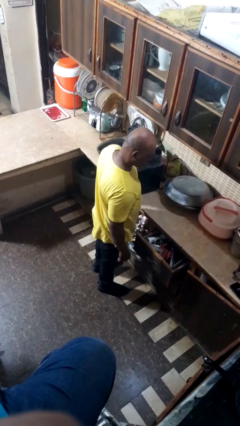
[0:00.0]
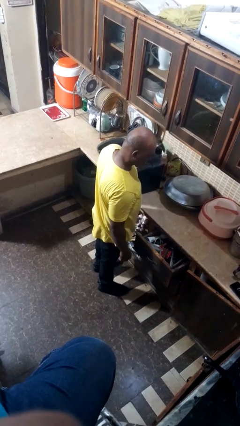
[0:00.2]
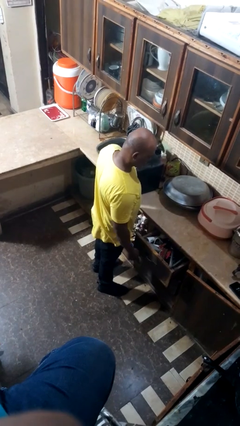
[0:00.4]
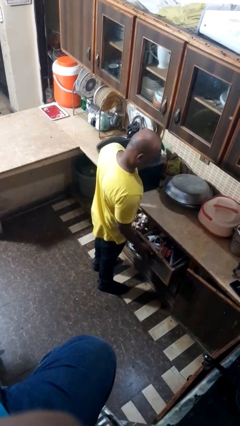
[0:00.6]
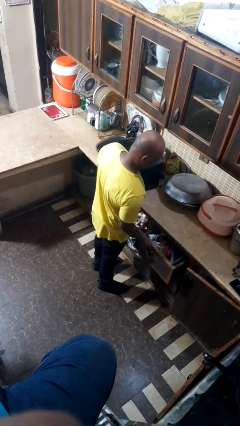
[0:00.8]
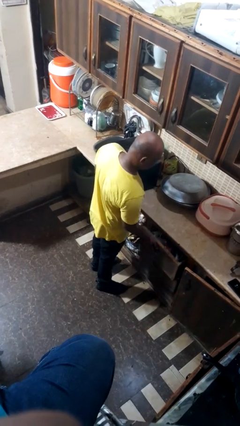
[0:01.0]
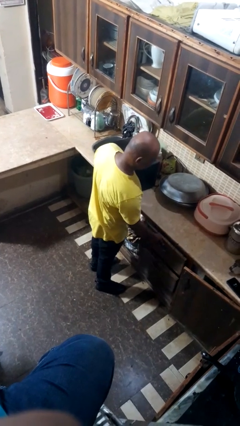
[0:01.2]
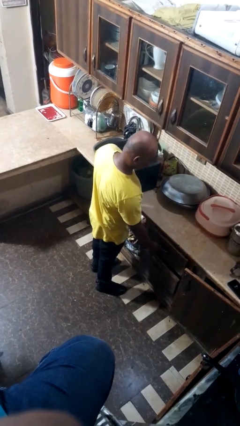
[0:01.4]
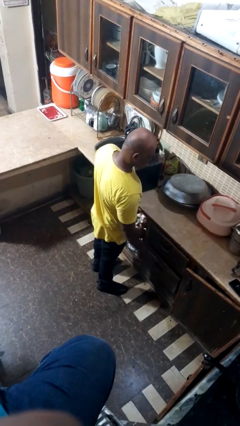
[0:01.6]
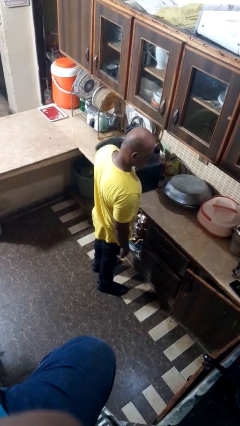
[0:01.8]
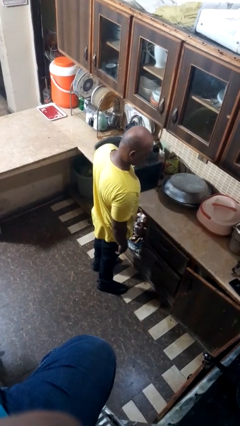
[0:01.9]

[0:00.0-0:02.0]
person closes dresser drawer

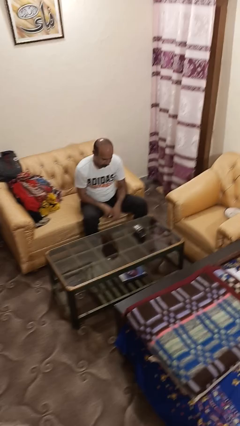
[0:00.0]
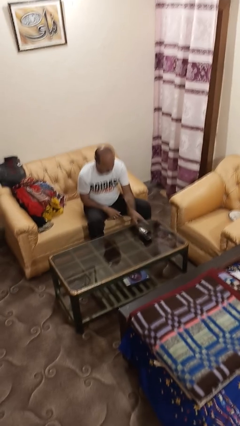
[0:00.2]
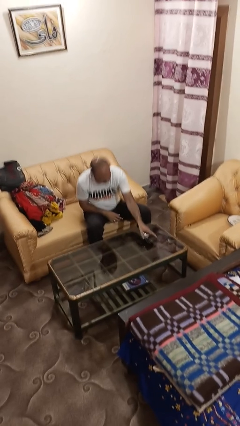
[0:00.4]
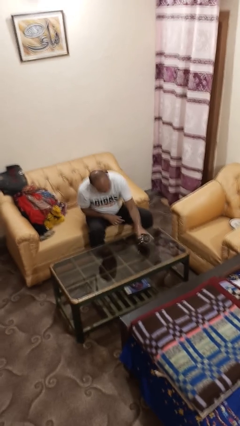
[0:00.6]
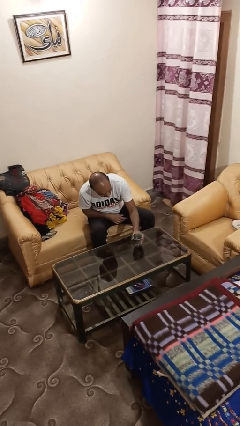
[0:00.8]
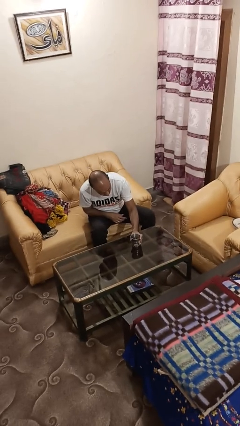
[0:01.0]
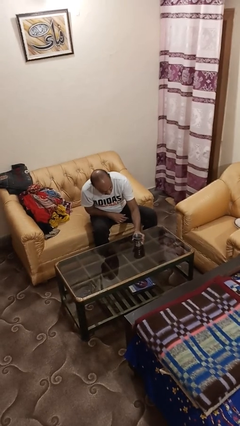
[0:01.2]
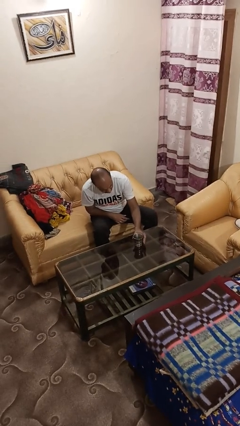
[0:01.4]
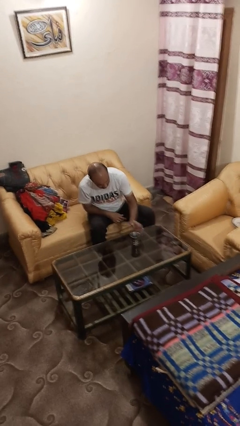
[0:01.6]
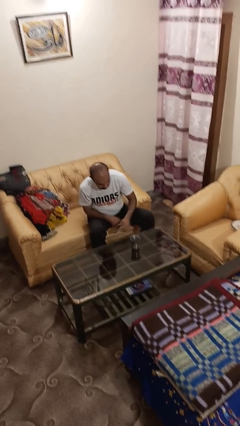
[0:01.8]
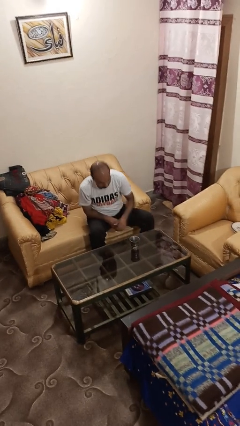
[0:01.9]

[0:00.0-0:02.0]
person sets upright glass

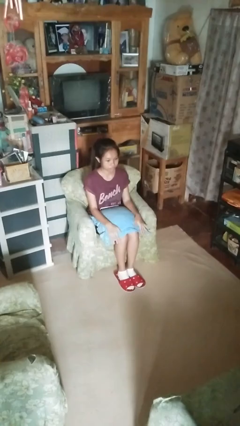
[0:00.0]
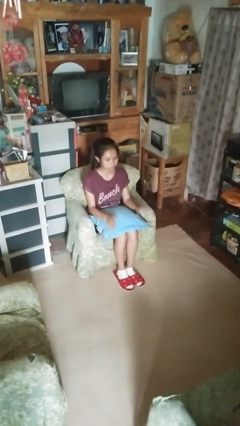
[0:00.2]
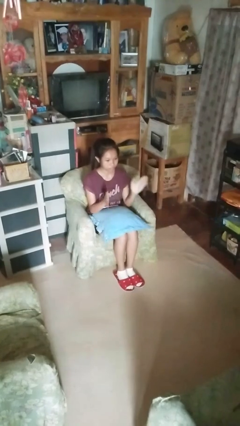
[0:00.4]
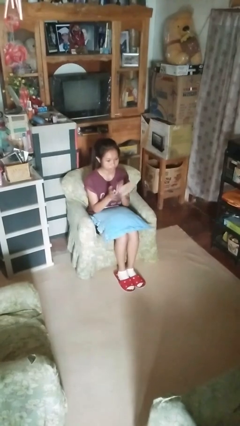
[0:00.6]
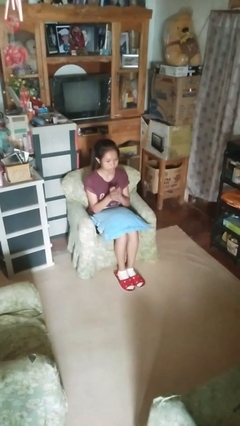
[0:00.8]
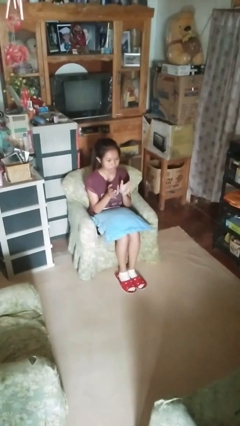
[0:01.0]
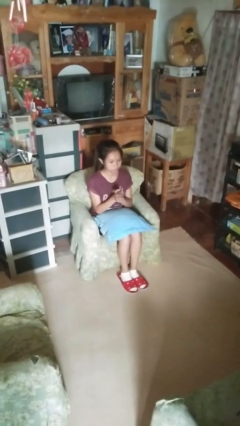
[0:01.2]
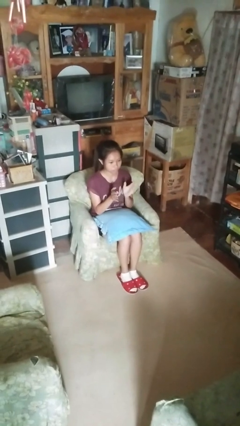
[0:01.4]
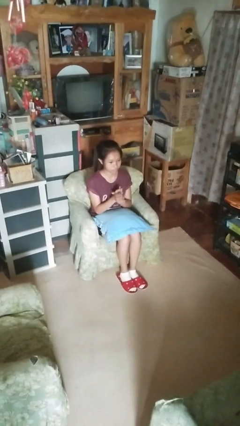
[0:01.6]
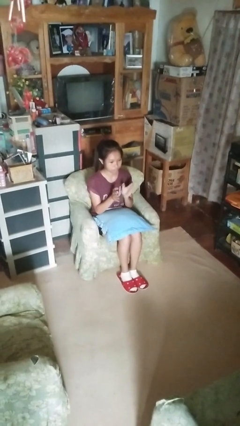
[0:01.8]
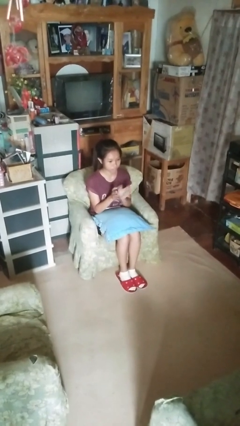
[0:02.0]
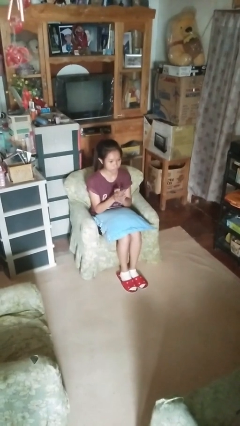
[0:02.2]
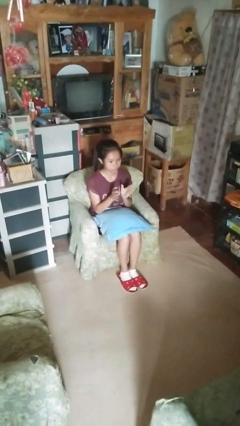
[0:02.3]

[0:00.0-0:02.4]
person claps hands

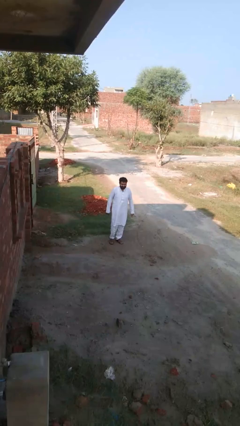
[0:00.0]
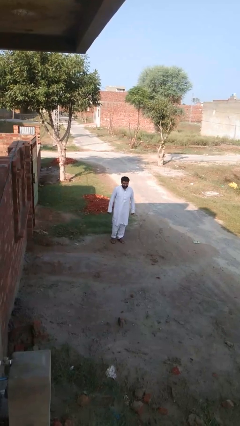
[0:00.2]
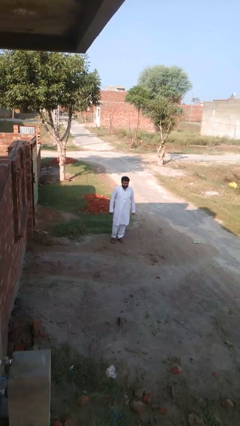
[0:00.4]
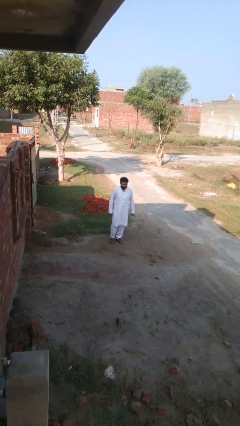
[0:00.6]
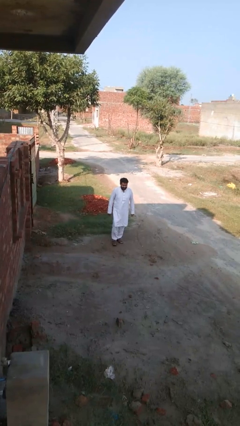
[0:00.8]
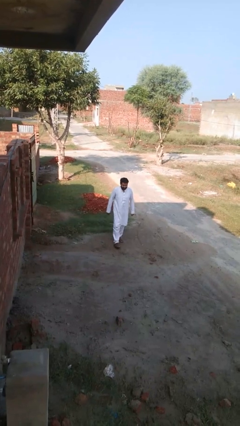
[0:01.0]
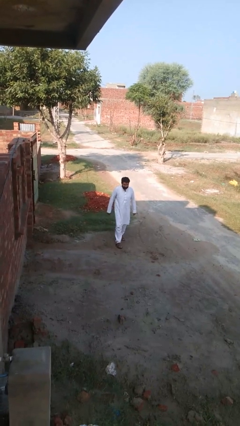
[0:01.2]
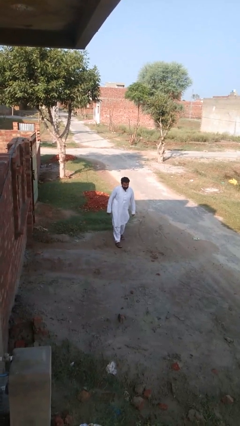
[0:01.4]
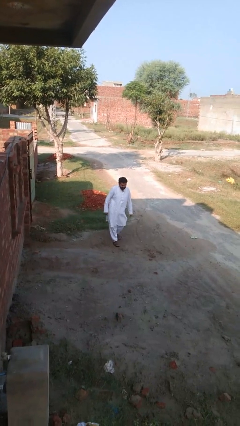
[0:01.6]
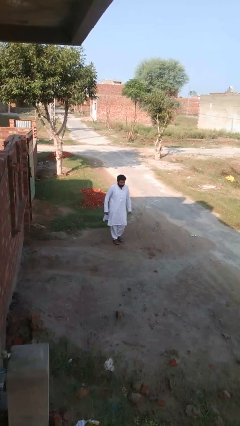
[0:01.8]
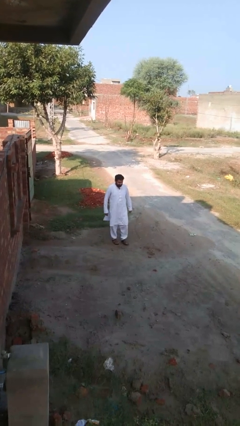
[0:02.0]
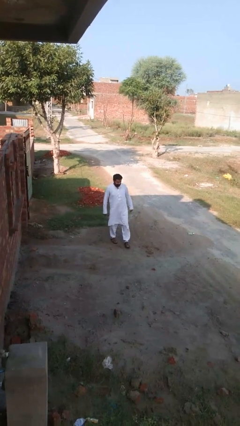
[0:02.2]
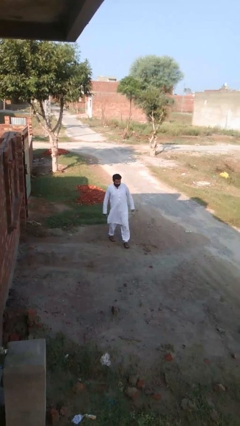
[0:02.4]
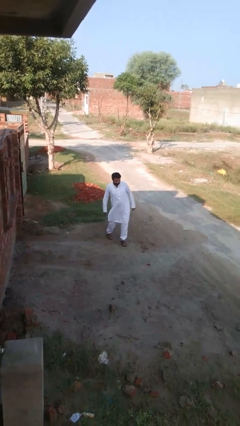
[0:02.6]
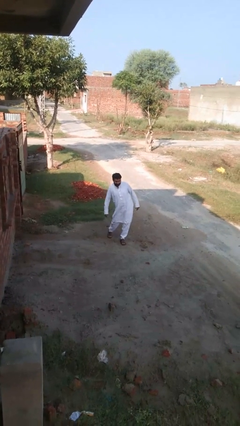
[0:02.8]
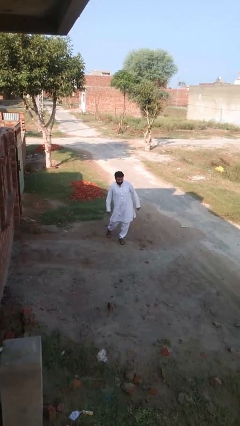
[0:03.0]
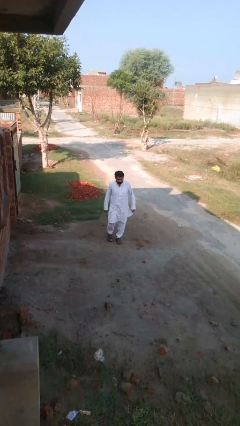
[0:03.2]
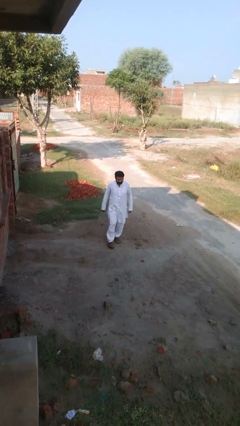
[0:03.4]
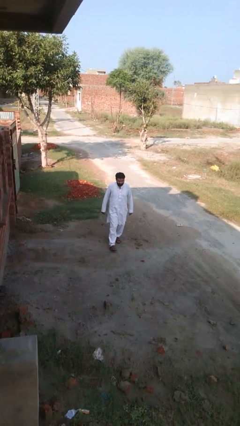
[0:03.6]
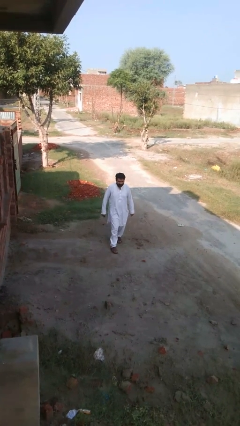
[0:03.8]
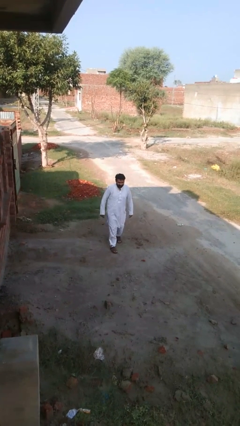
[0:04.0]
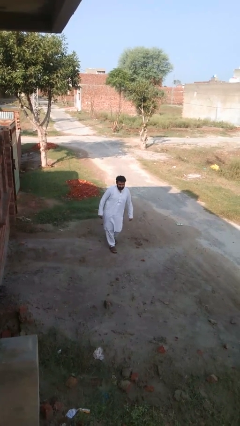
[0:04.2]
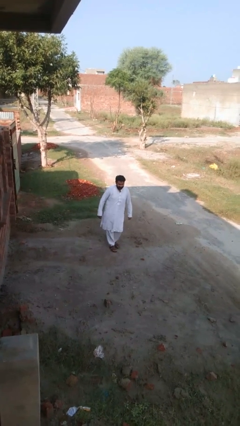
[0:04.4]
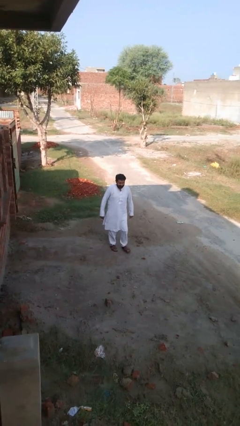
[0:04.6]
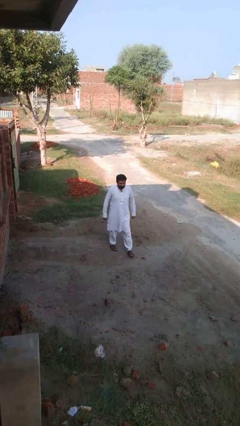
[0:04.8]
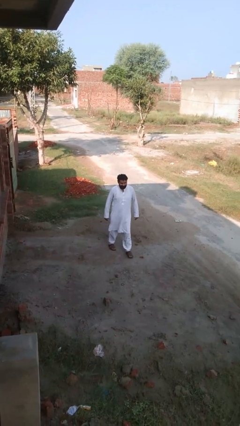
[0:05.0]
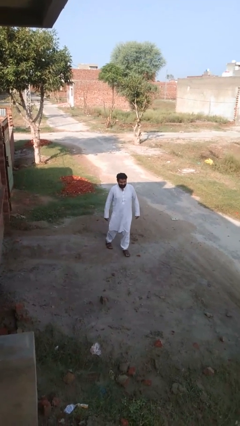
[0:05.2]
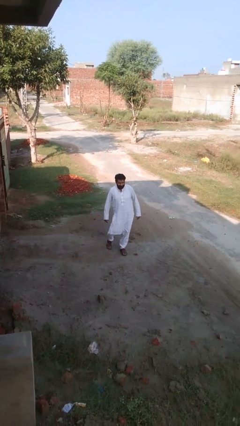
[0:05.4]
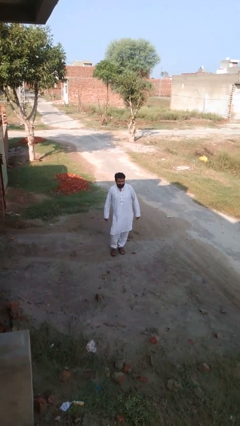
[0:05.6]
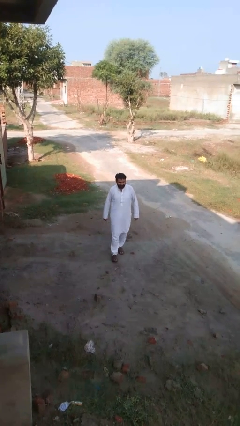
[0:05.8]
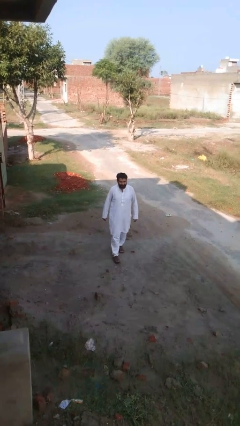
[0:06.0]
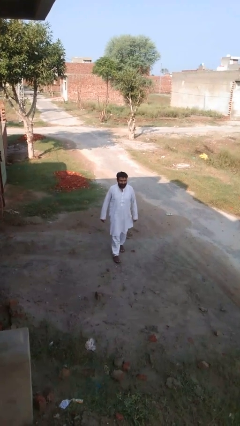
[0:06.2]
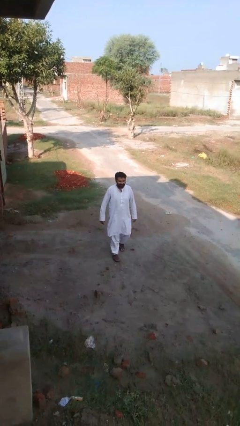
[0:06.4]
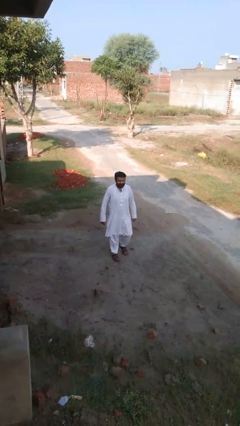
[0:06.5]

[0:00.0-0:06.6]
person walks tiptoe

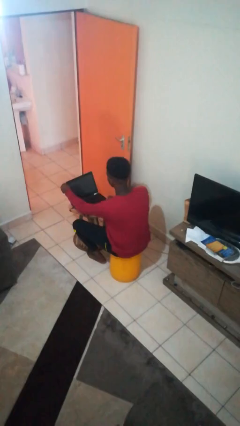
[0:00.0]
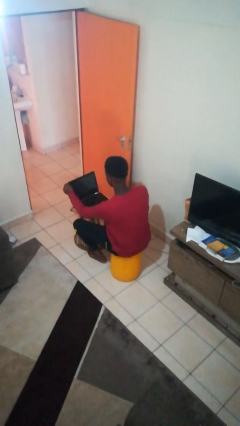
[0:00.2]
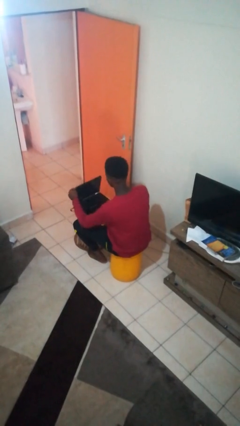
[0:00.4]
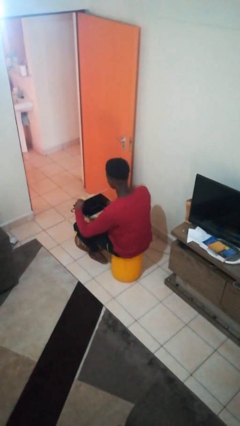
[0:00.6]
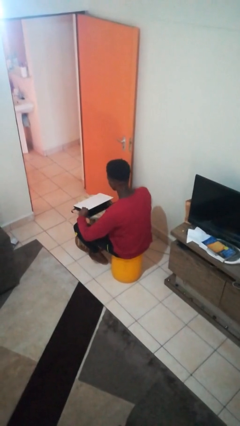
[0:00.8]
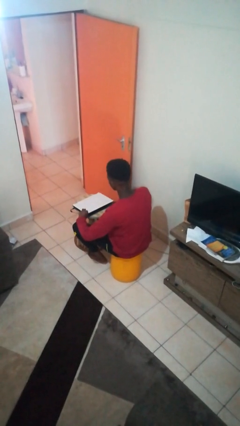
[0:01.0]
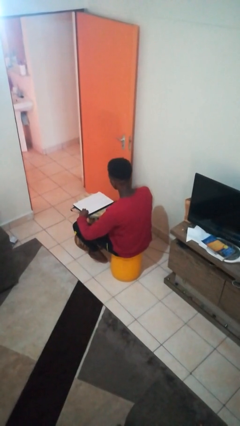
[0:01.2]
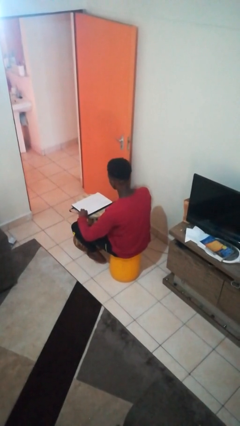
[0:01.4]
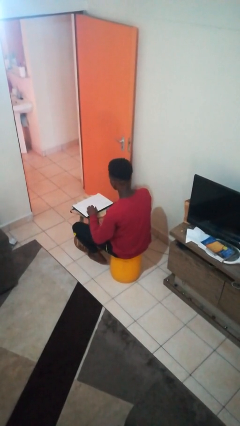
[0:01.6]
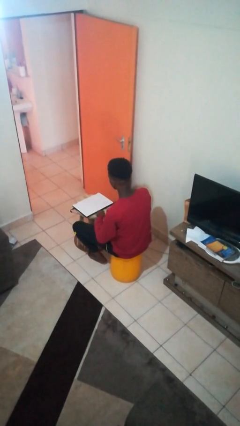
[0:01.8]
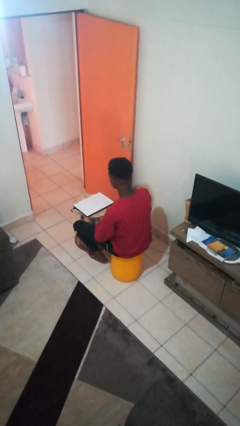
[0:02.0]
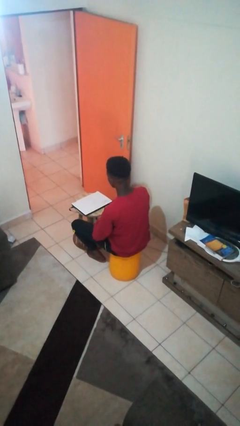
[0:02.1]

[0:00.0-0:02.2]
person closes laptop

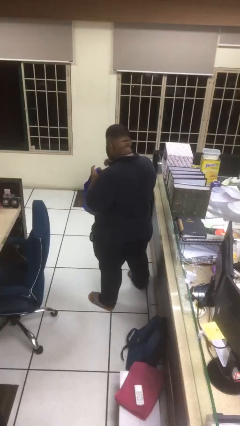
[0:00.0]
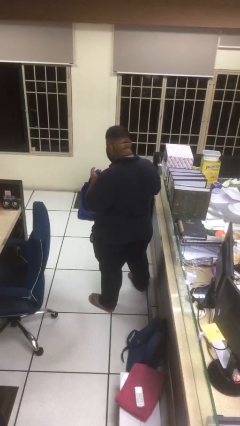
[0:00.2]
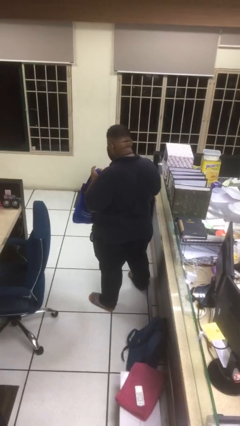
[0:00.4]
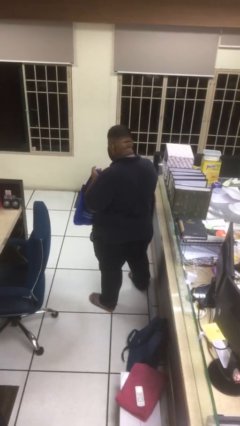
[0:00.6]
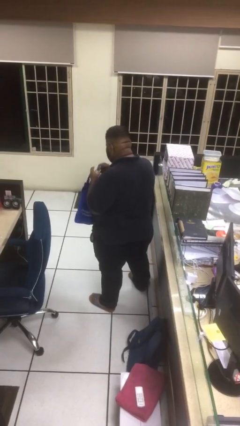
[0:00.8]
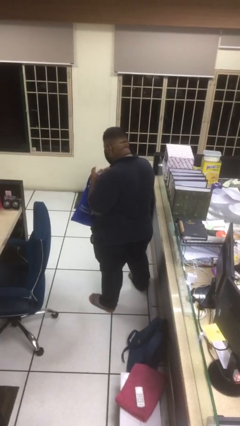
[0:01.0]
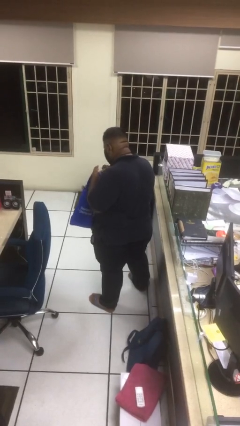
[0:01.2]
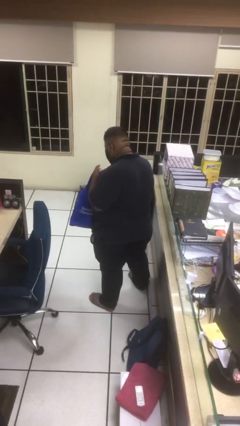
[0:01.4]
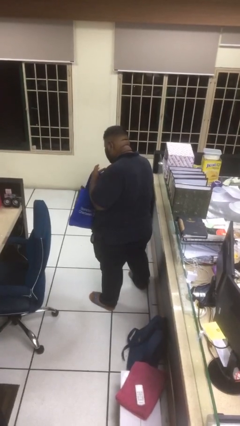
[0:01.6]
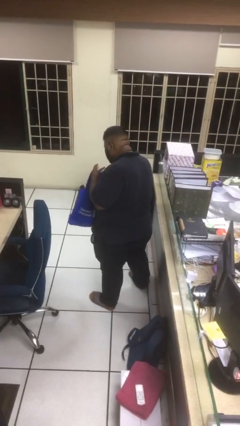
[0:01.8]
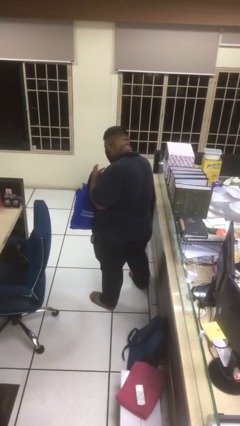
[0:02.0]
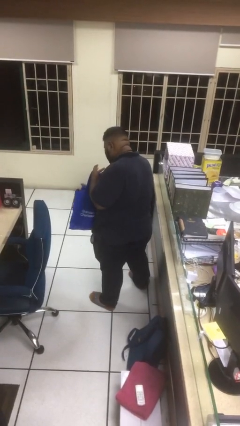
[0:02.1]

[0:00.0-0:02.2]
person searches in bag
